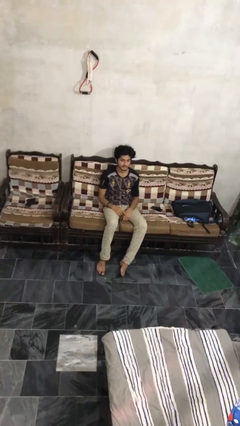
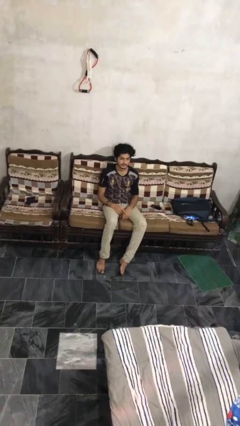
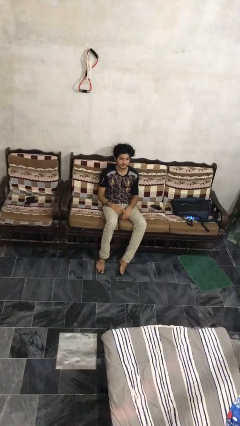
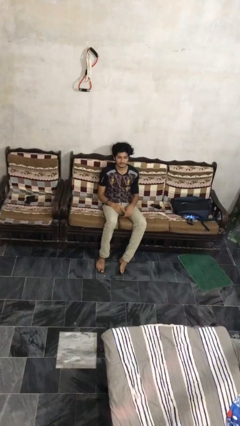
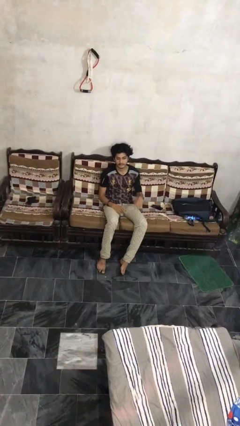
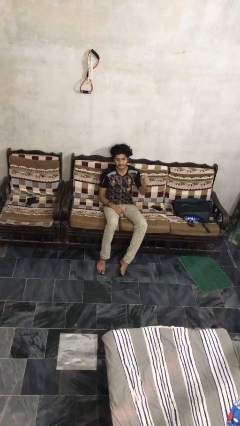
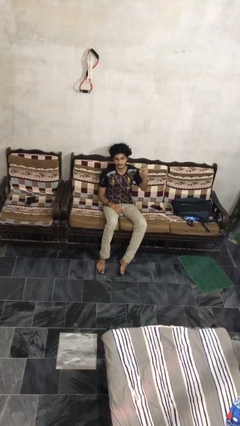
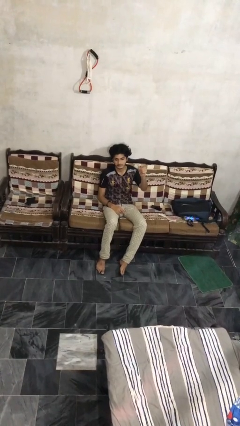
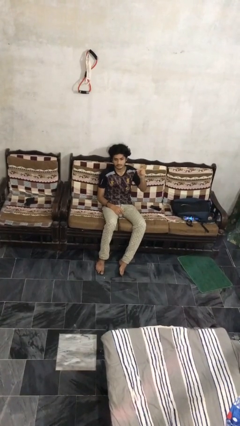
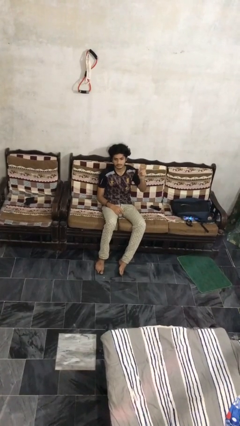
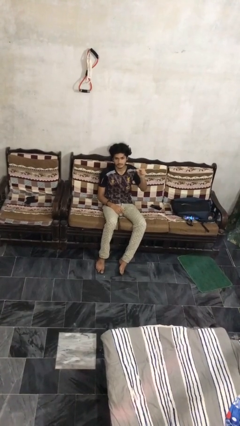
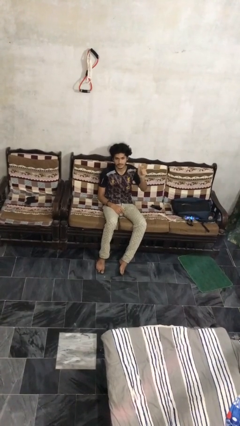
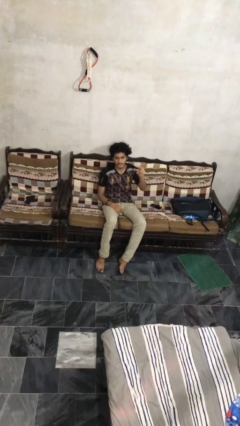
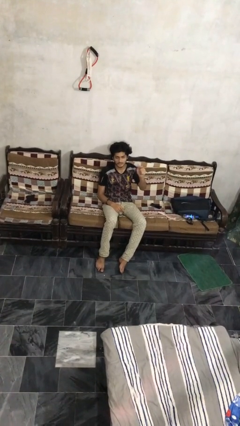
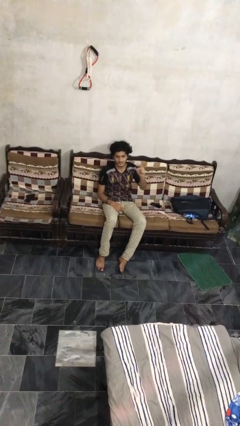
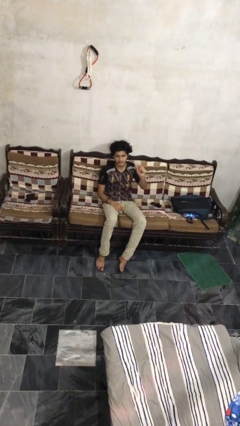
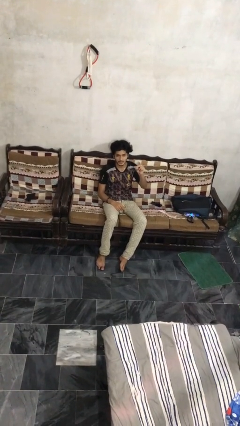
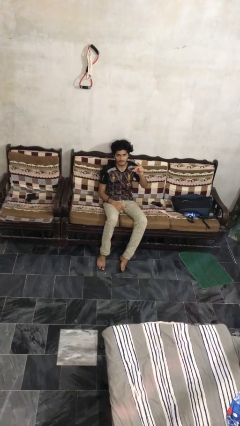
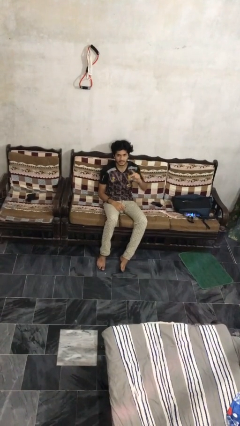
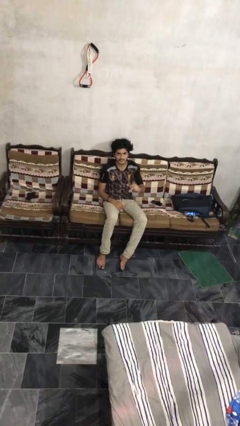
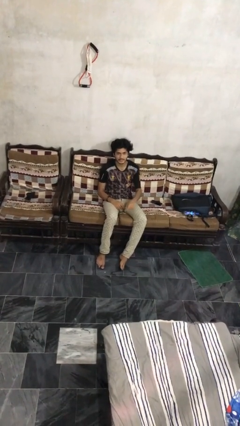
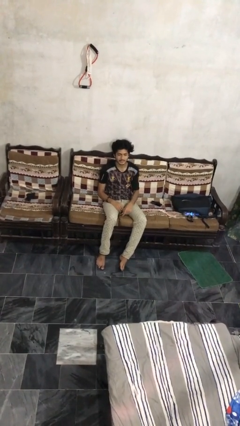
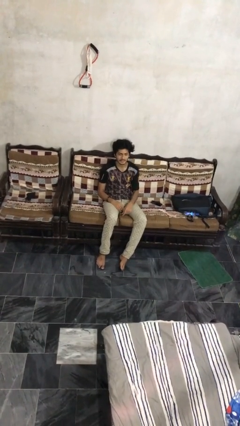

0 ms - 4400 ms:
person snaps fingers

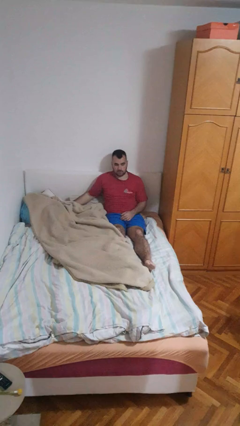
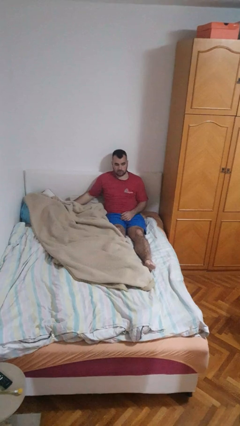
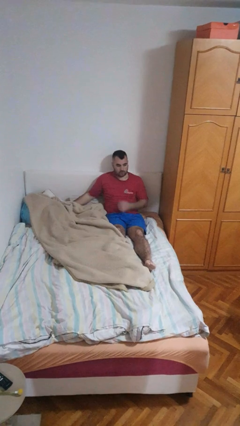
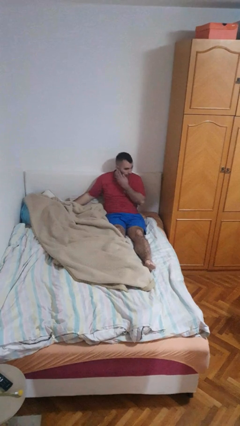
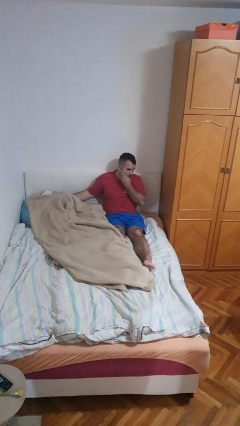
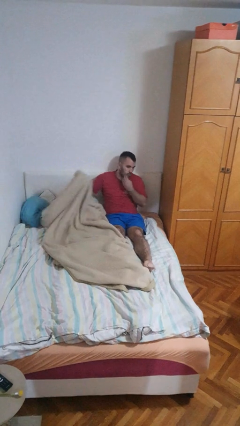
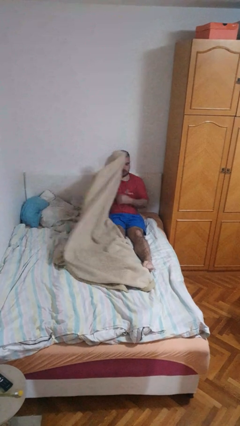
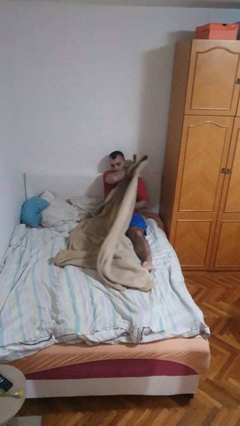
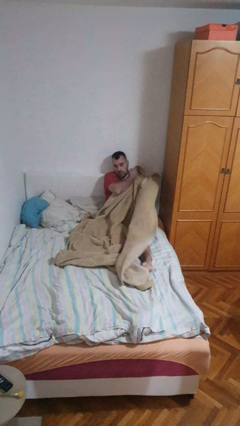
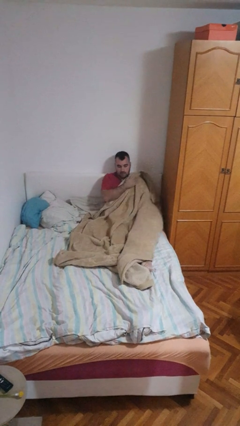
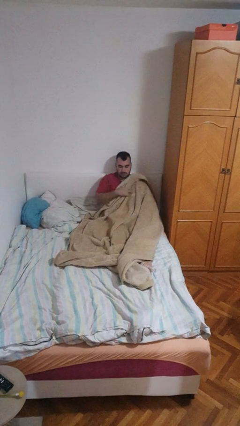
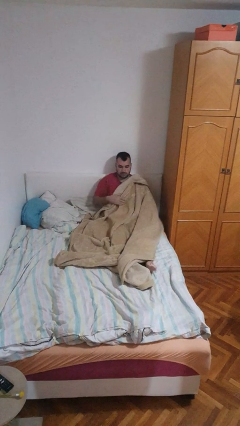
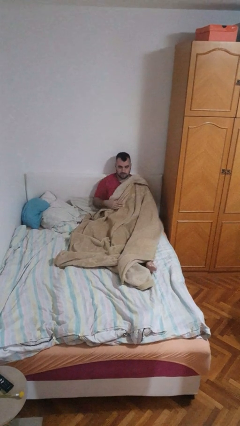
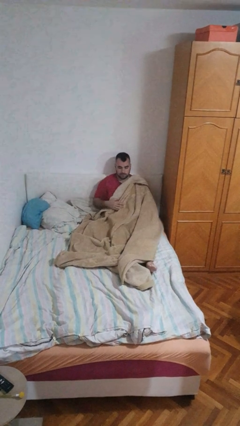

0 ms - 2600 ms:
person covers with blanket

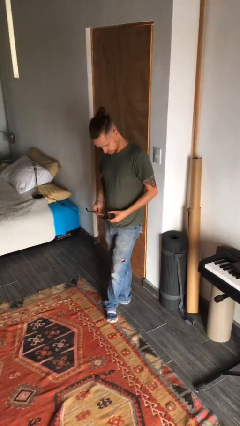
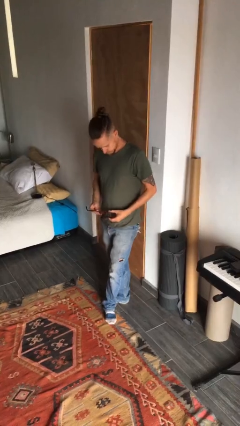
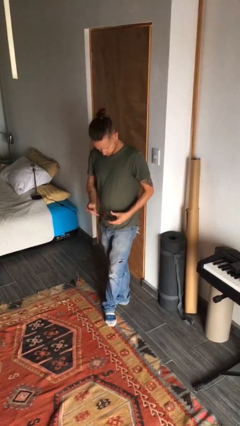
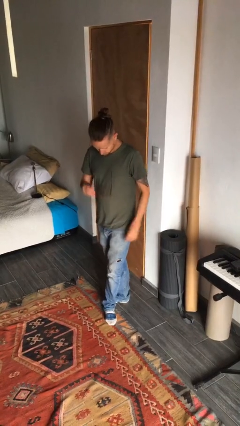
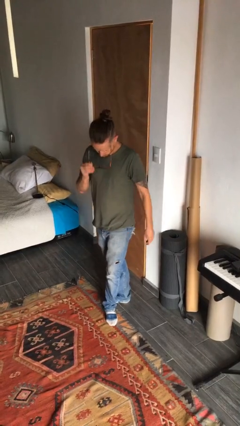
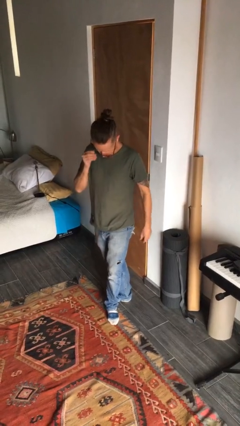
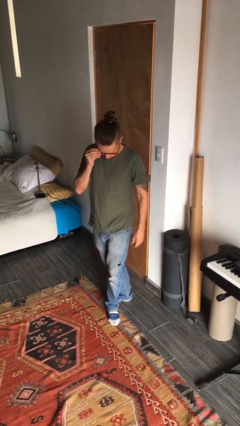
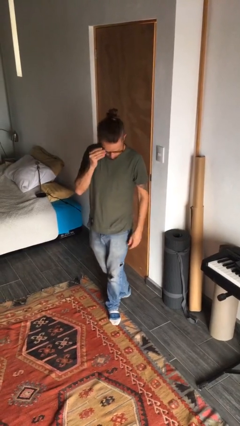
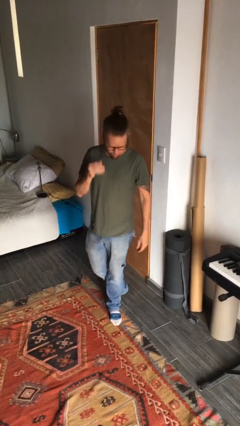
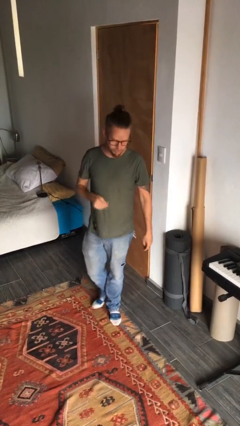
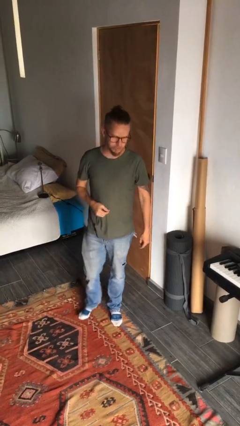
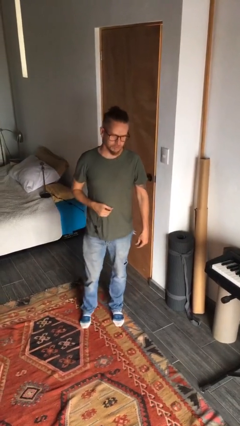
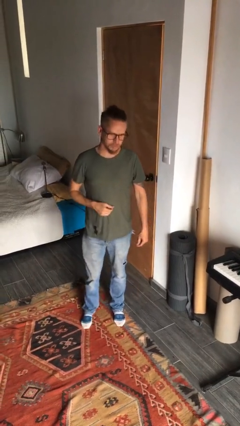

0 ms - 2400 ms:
person puts on glasses

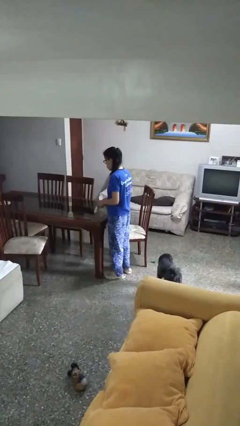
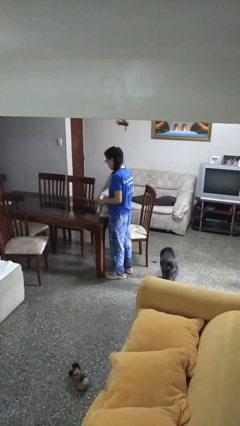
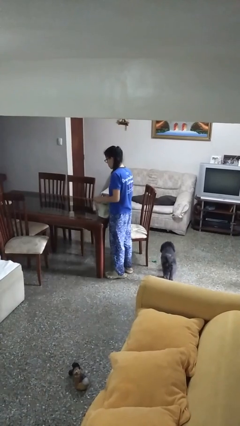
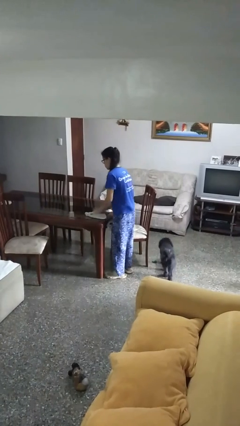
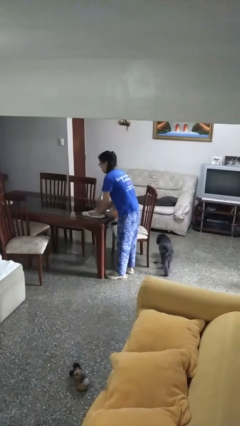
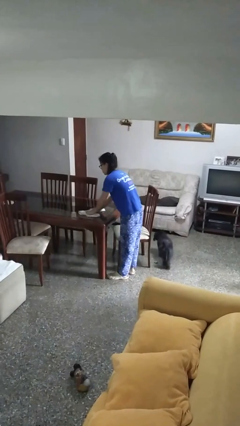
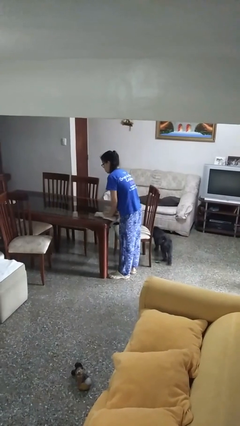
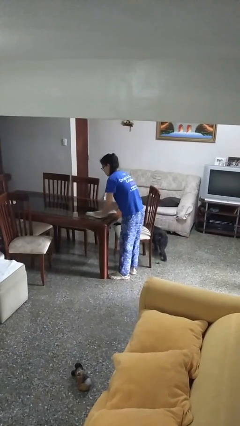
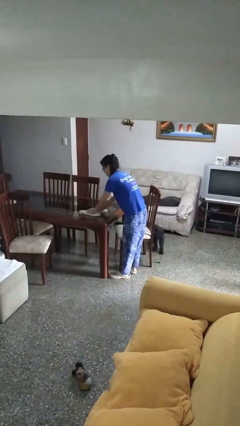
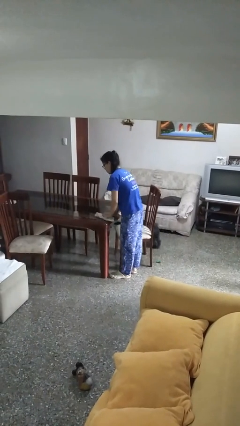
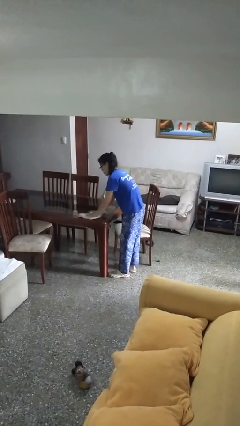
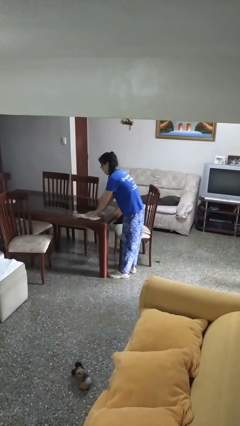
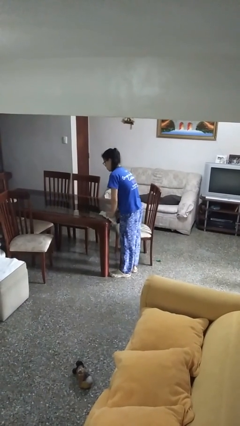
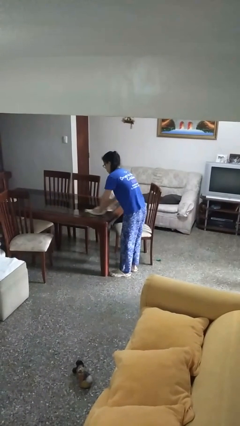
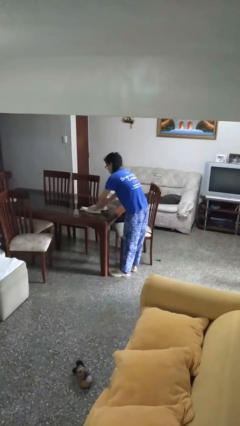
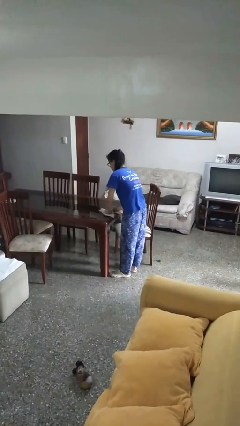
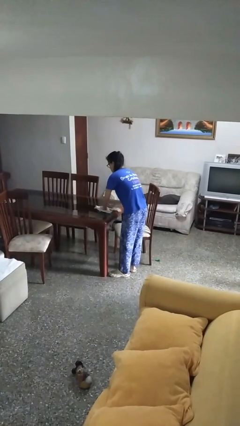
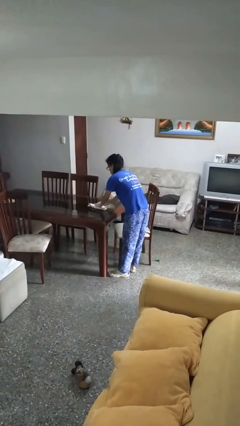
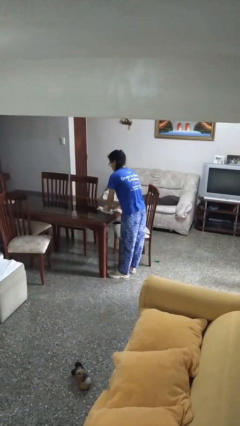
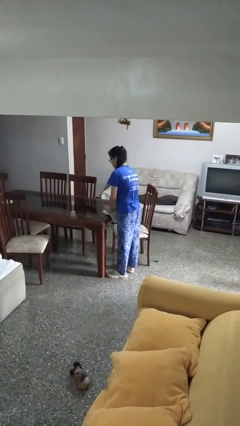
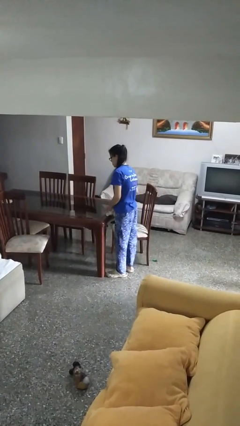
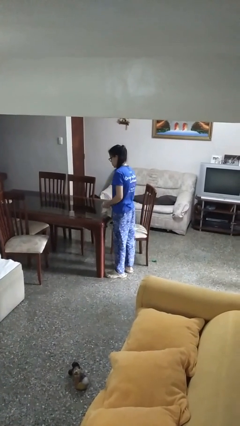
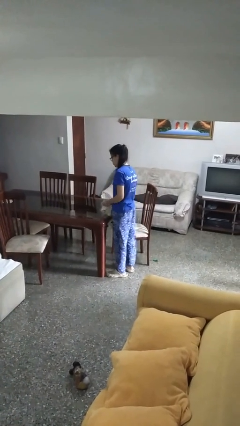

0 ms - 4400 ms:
person cleans table with rag

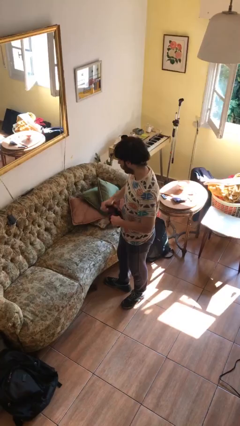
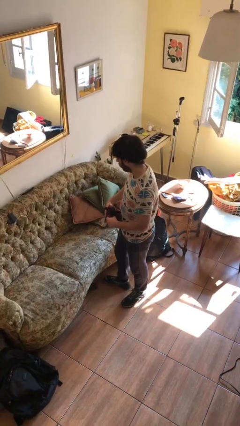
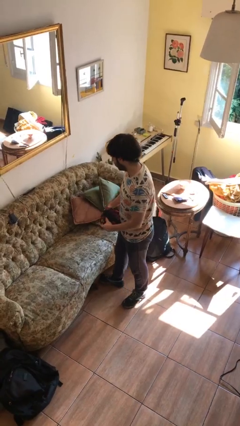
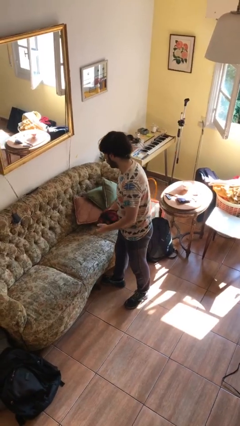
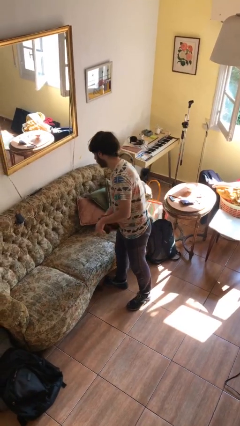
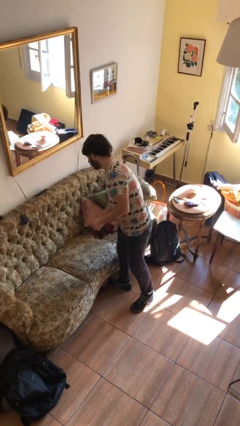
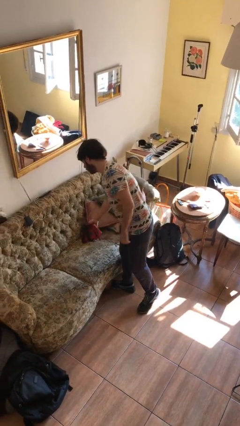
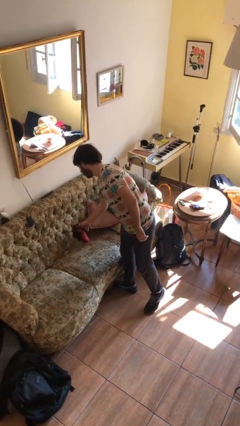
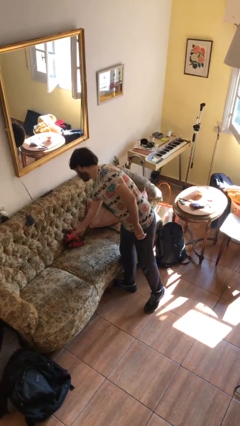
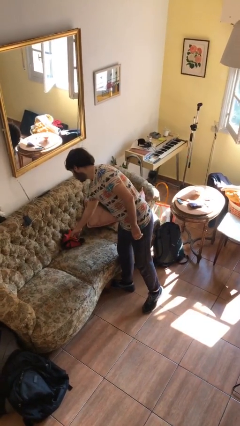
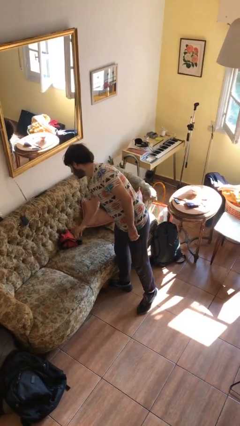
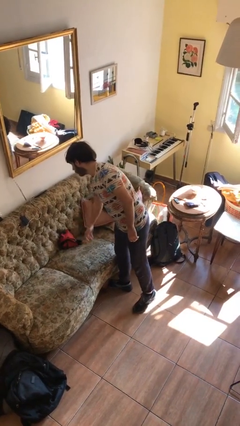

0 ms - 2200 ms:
person puts down object on couch

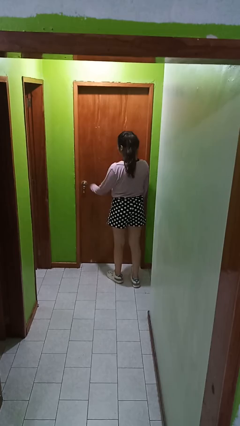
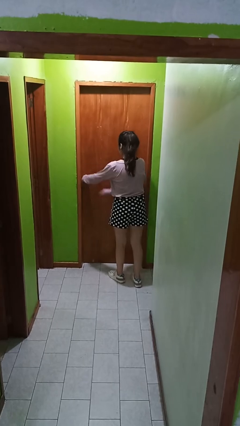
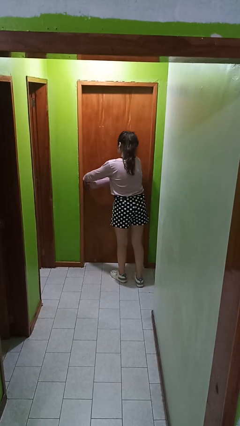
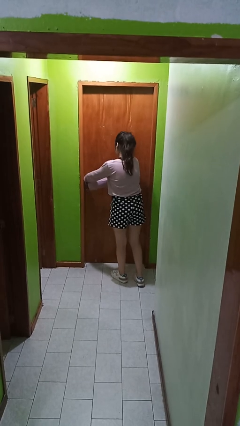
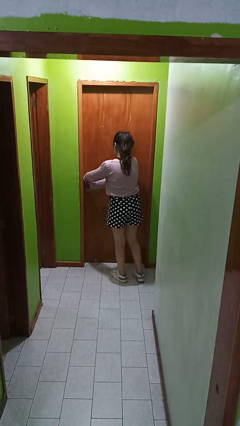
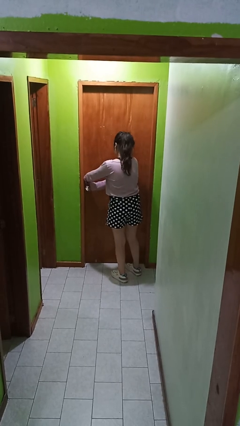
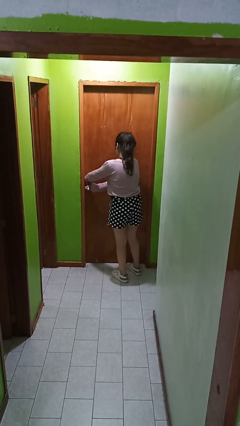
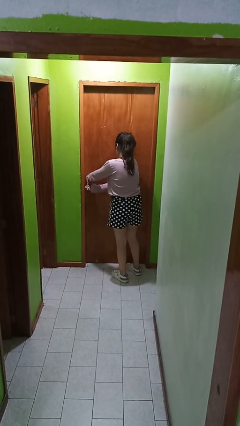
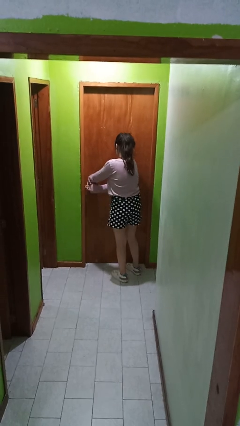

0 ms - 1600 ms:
person locks door with keys
